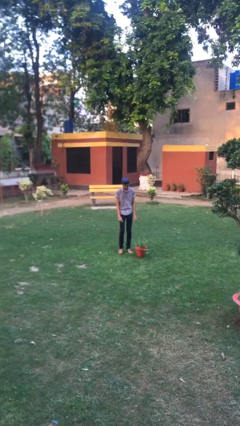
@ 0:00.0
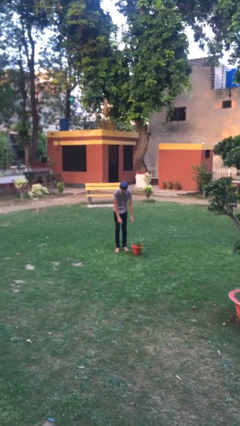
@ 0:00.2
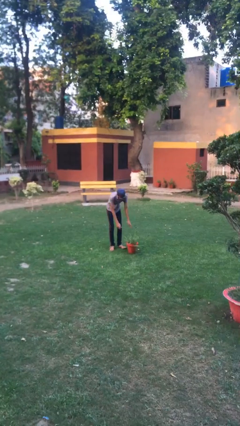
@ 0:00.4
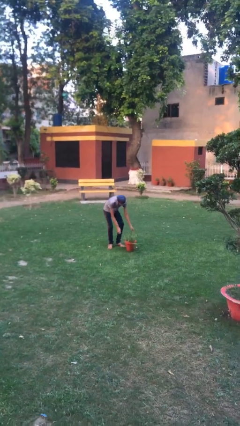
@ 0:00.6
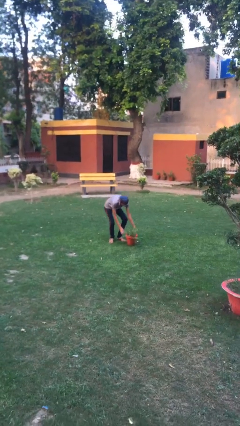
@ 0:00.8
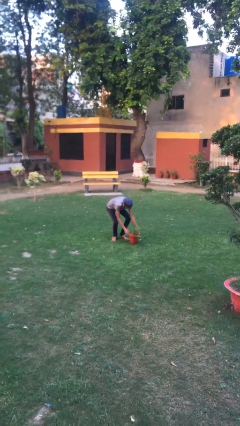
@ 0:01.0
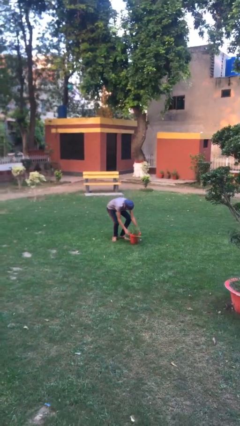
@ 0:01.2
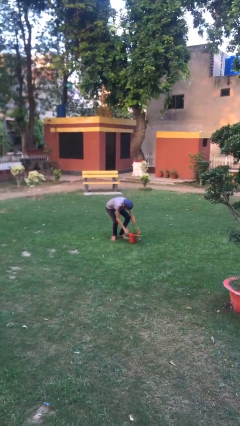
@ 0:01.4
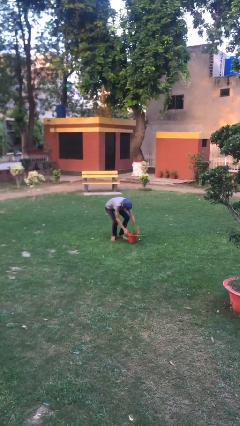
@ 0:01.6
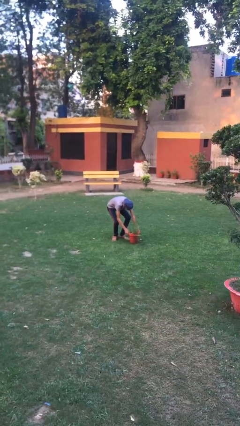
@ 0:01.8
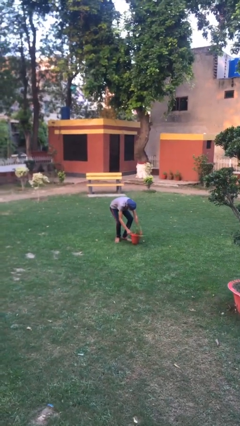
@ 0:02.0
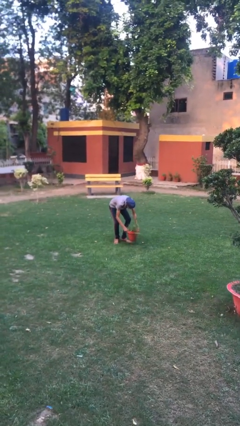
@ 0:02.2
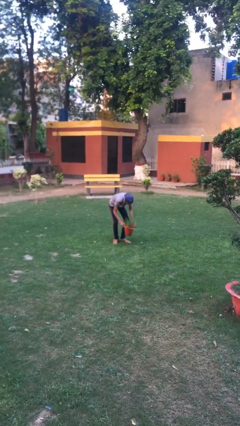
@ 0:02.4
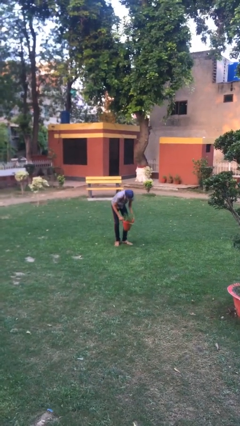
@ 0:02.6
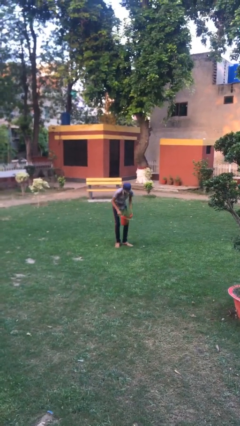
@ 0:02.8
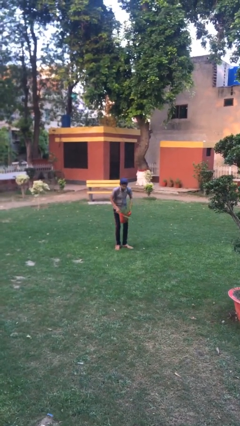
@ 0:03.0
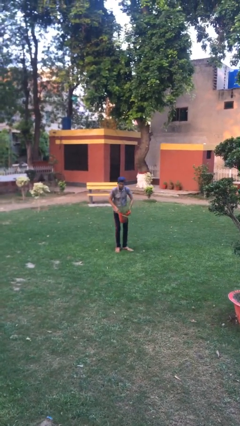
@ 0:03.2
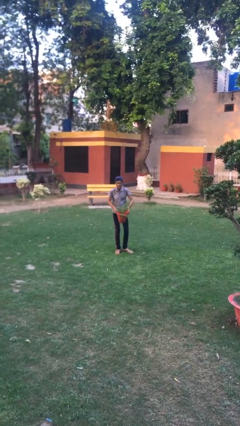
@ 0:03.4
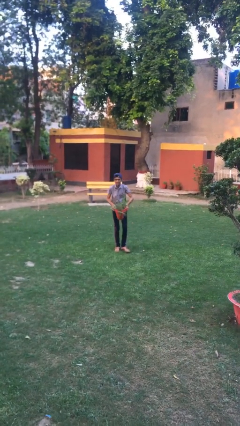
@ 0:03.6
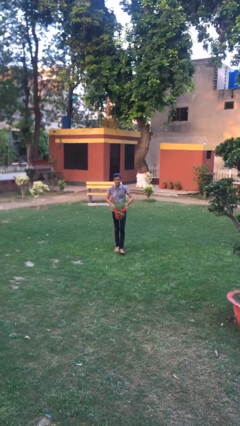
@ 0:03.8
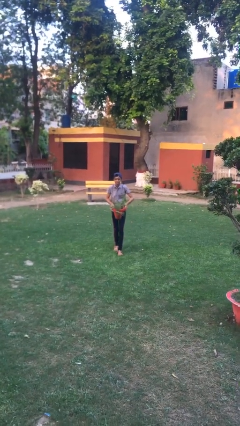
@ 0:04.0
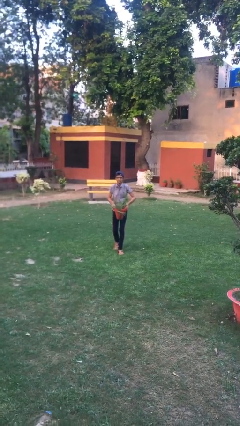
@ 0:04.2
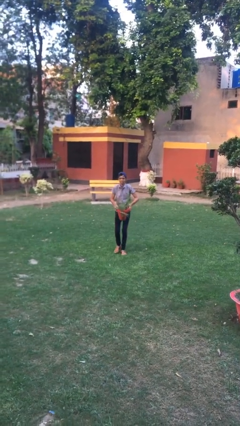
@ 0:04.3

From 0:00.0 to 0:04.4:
person picks up object from floor

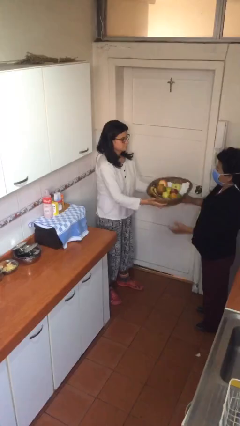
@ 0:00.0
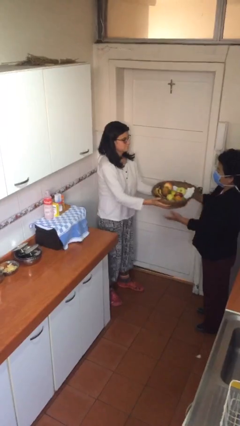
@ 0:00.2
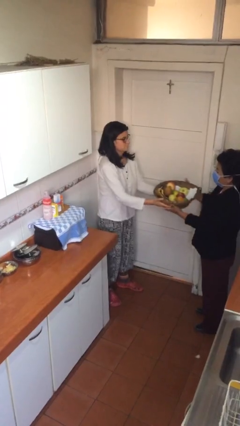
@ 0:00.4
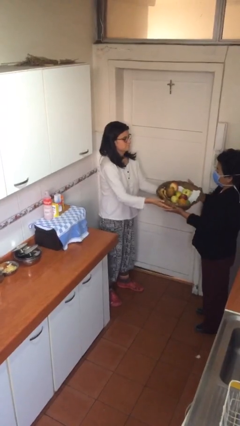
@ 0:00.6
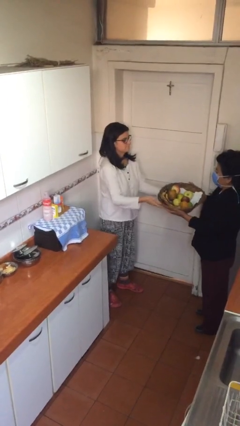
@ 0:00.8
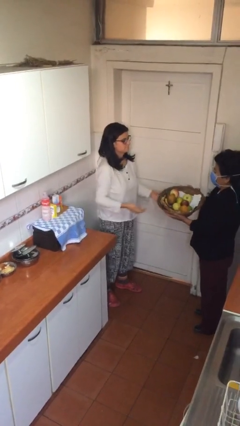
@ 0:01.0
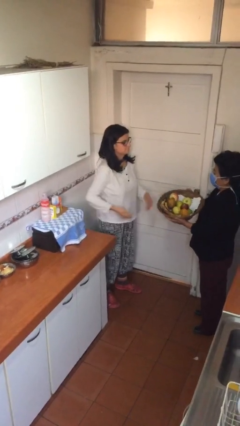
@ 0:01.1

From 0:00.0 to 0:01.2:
person transfers object to person

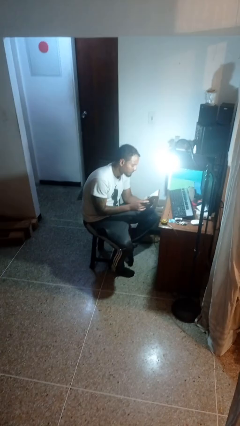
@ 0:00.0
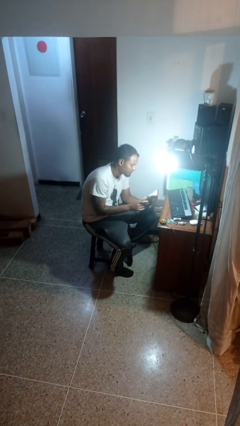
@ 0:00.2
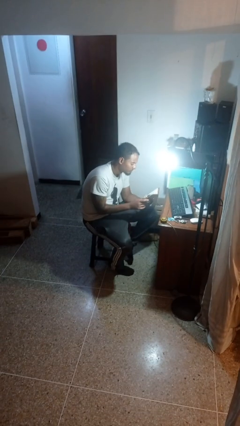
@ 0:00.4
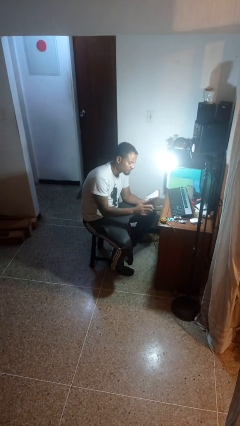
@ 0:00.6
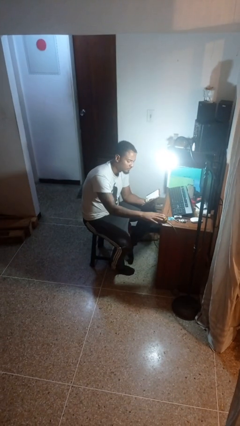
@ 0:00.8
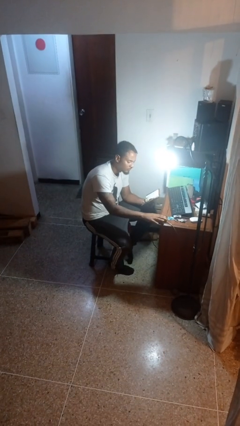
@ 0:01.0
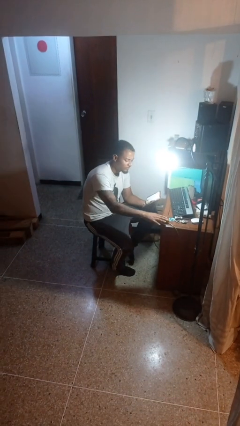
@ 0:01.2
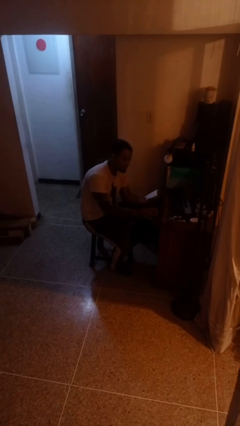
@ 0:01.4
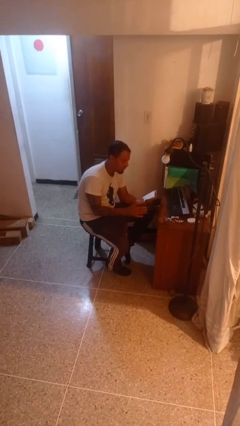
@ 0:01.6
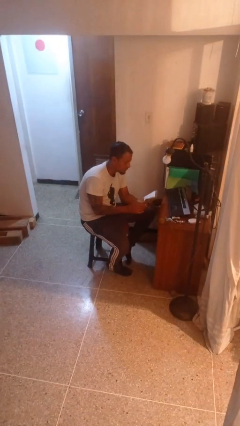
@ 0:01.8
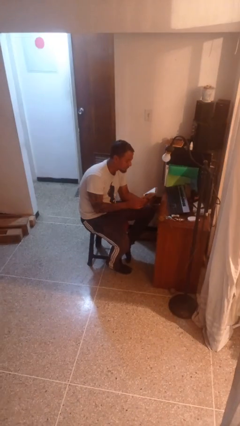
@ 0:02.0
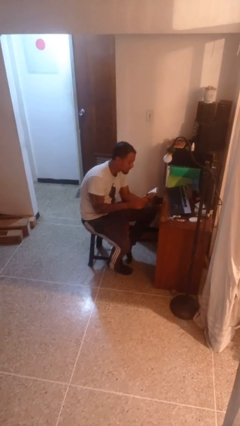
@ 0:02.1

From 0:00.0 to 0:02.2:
person turns off lamp

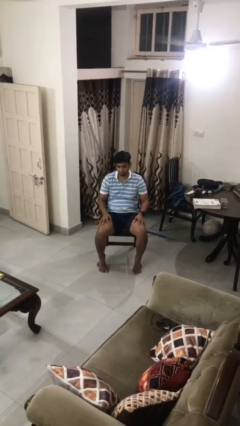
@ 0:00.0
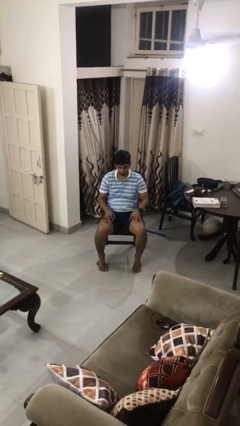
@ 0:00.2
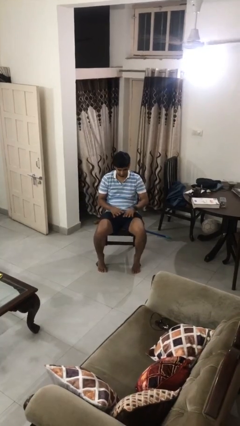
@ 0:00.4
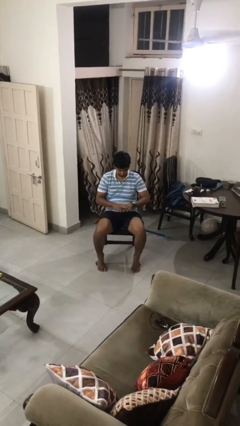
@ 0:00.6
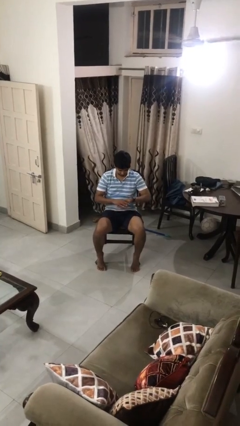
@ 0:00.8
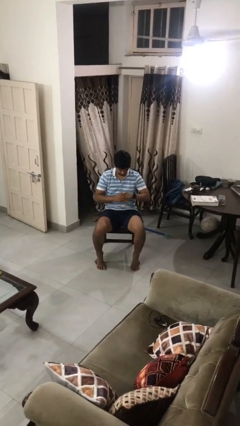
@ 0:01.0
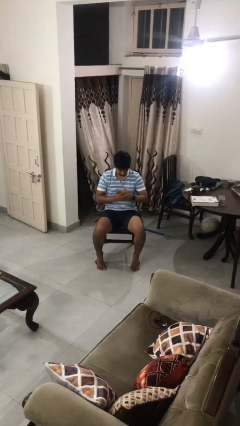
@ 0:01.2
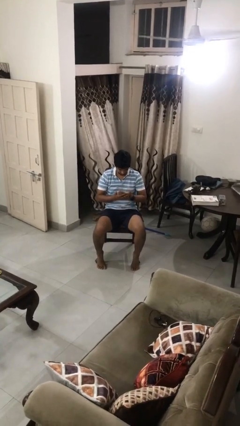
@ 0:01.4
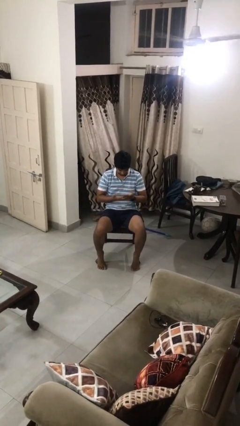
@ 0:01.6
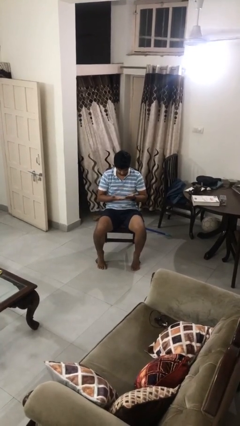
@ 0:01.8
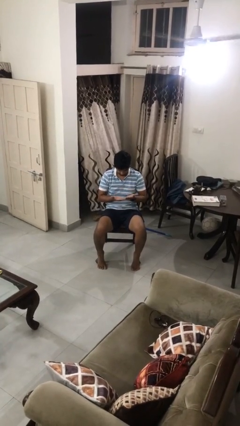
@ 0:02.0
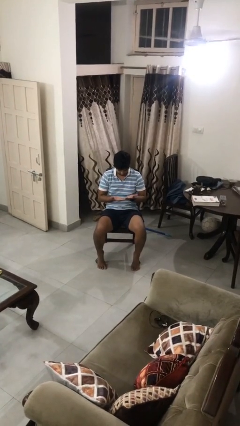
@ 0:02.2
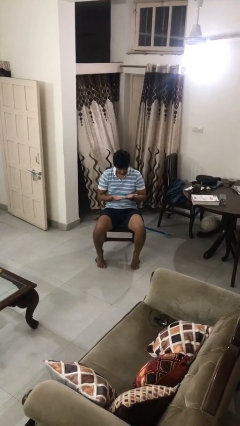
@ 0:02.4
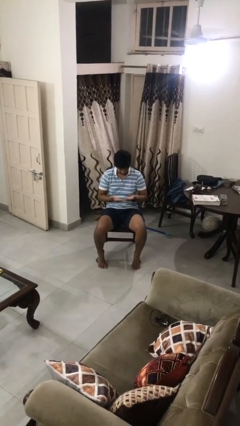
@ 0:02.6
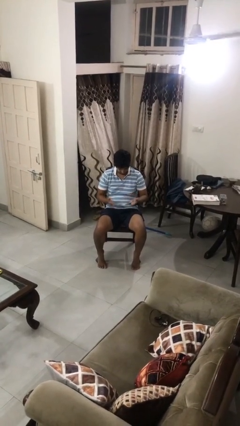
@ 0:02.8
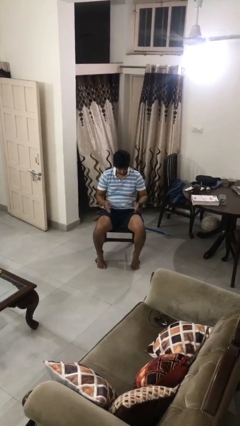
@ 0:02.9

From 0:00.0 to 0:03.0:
person looks at hands in lap

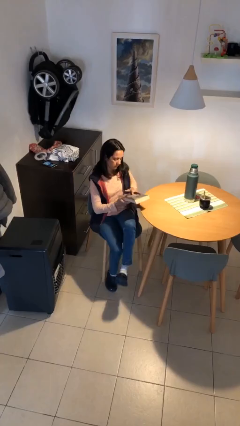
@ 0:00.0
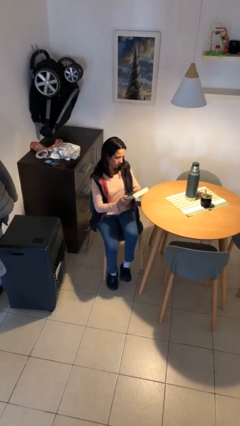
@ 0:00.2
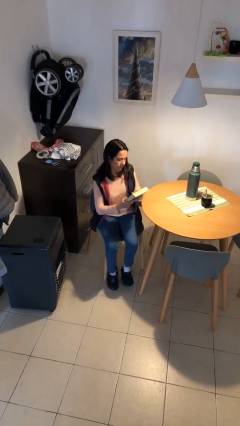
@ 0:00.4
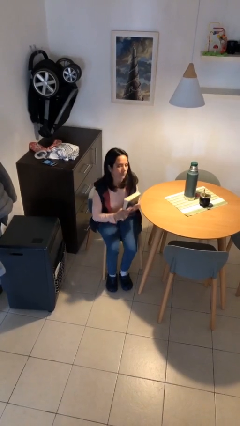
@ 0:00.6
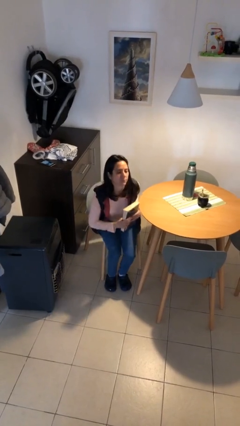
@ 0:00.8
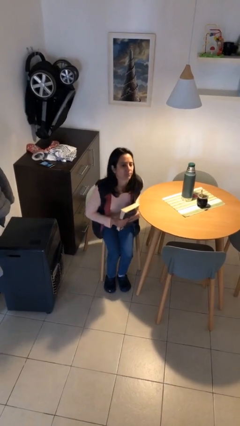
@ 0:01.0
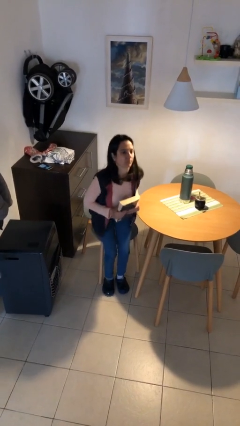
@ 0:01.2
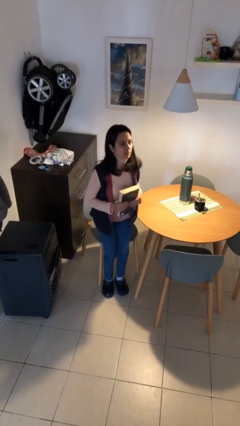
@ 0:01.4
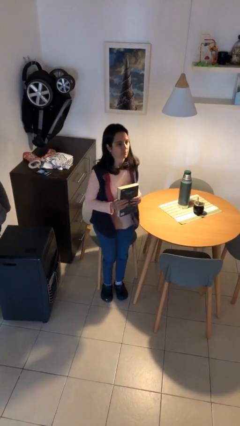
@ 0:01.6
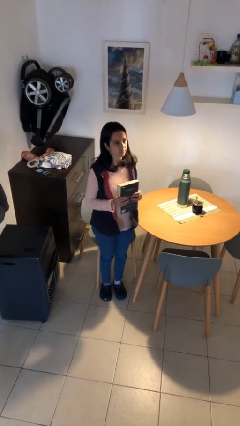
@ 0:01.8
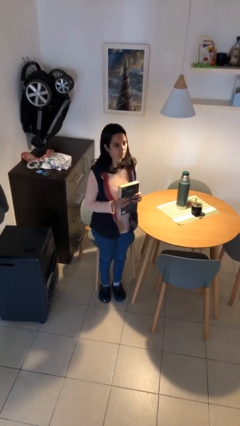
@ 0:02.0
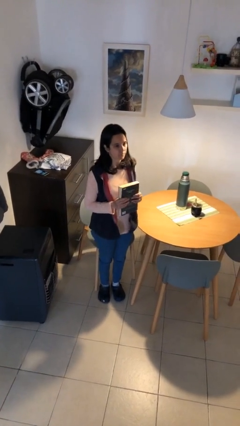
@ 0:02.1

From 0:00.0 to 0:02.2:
person stands up

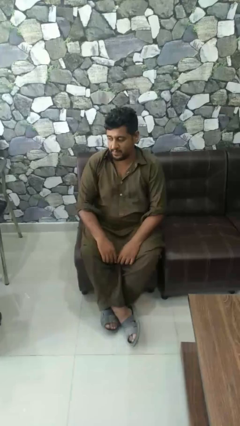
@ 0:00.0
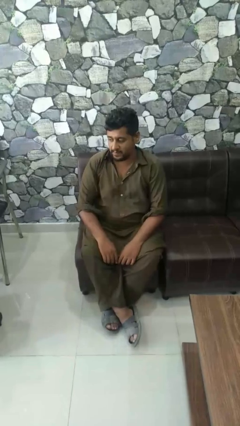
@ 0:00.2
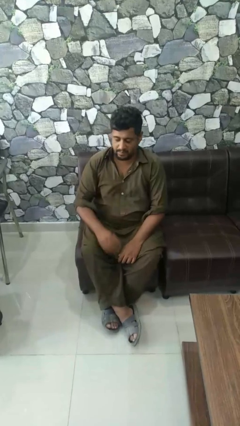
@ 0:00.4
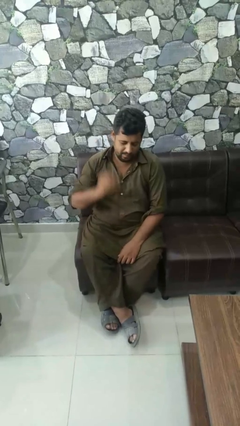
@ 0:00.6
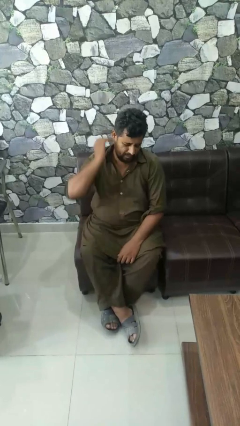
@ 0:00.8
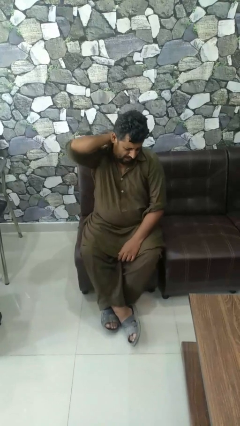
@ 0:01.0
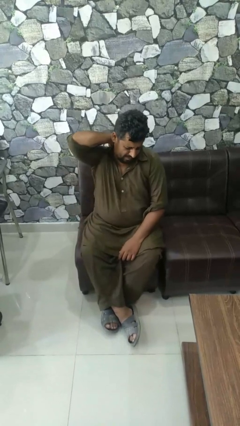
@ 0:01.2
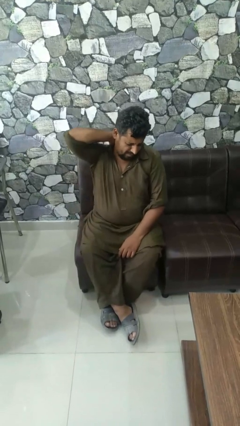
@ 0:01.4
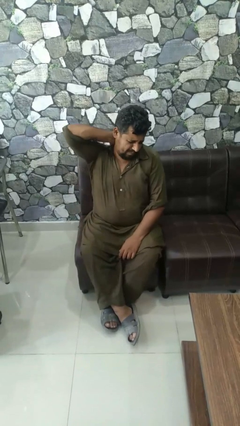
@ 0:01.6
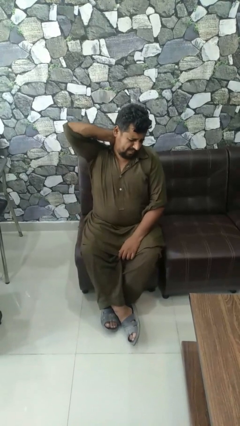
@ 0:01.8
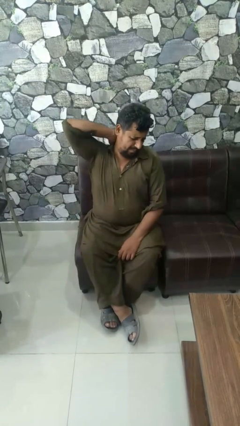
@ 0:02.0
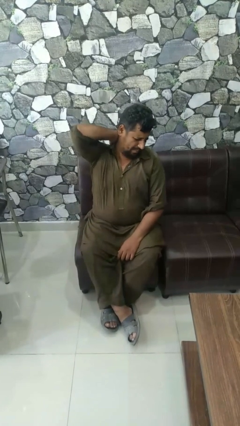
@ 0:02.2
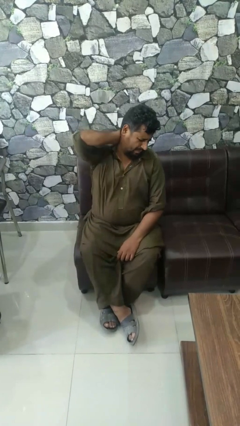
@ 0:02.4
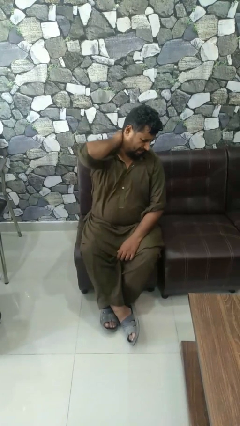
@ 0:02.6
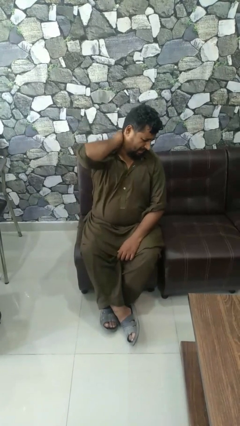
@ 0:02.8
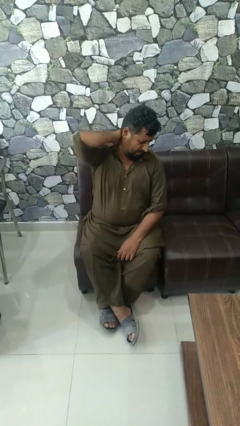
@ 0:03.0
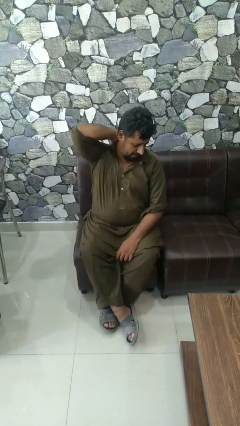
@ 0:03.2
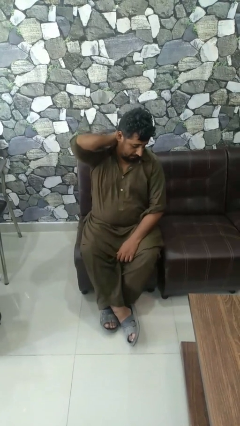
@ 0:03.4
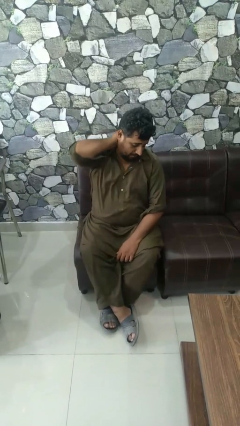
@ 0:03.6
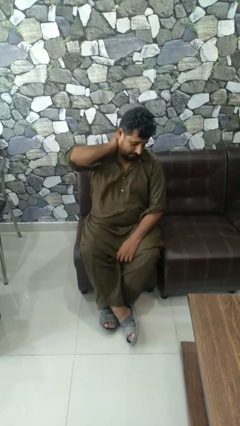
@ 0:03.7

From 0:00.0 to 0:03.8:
person rubs neck

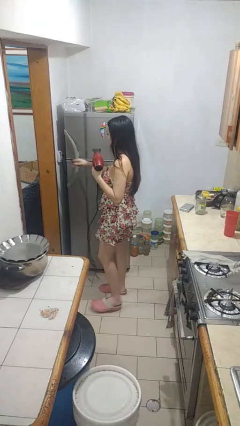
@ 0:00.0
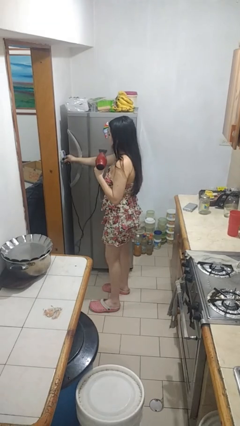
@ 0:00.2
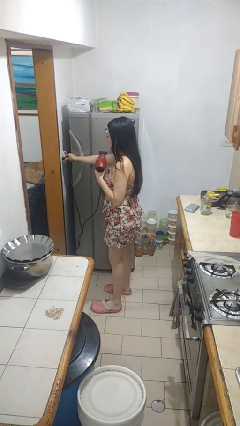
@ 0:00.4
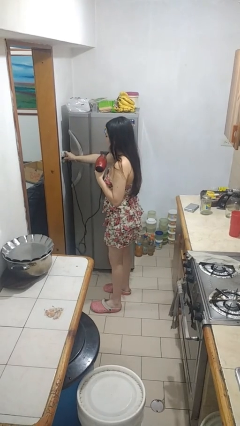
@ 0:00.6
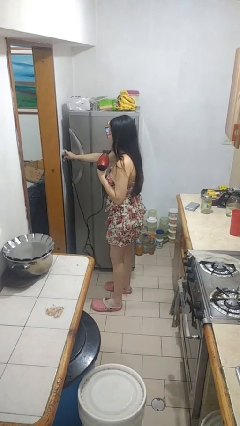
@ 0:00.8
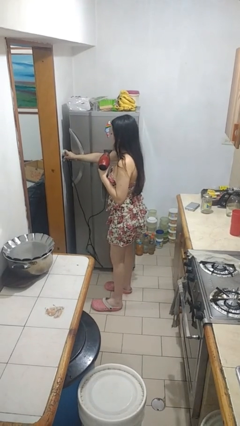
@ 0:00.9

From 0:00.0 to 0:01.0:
person plugs into electrical socket
